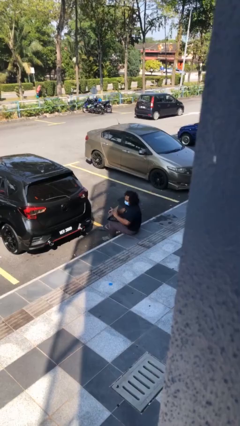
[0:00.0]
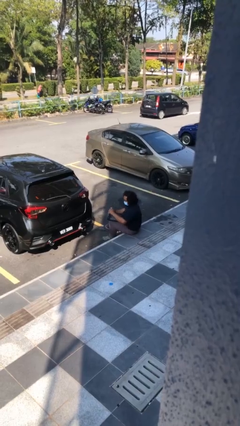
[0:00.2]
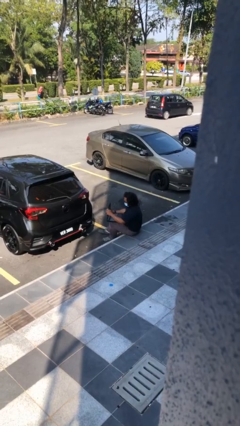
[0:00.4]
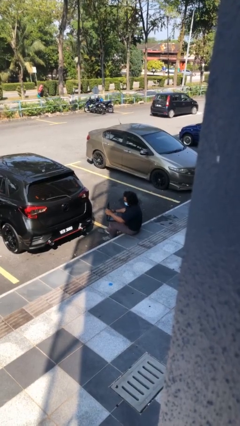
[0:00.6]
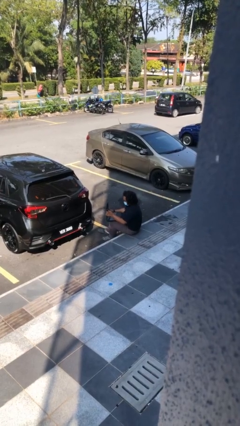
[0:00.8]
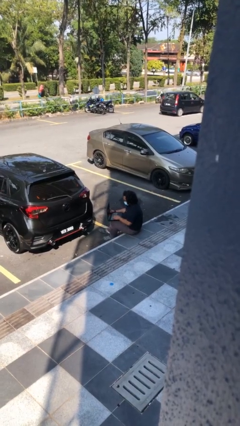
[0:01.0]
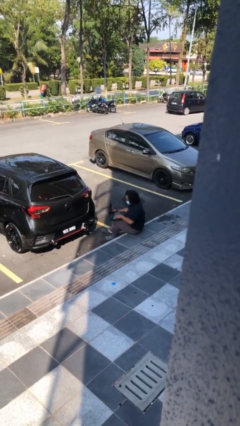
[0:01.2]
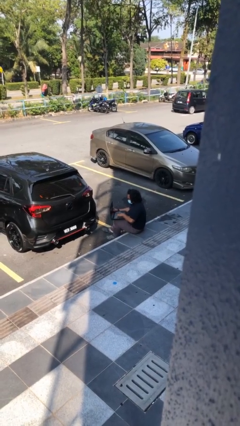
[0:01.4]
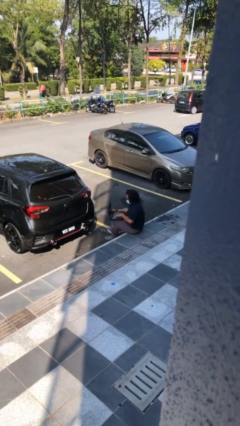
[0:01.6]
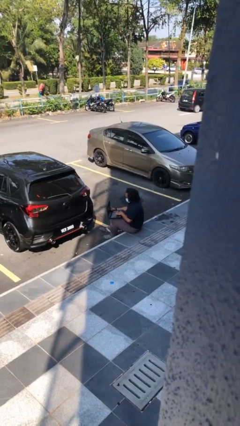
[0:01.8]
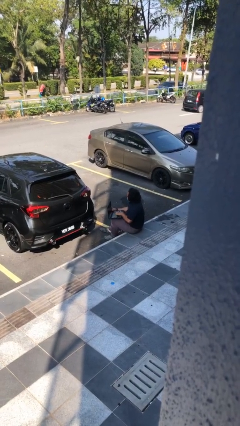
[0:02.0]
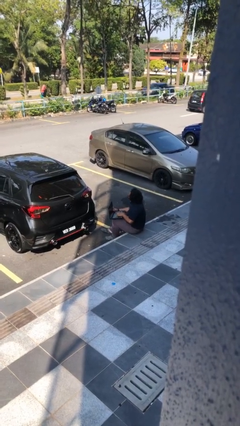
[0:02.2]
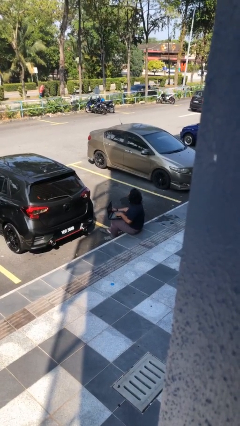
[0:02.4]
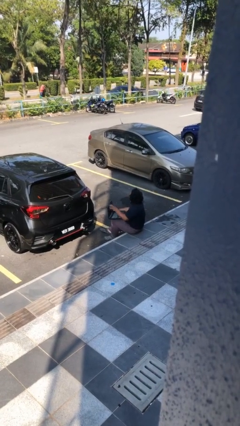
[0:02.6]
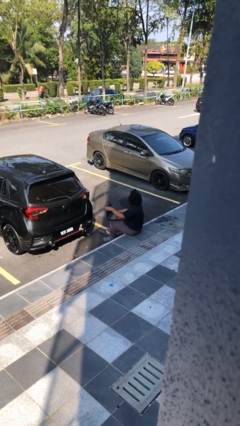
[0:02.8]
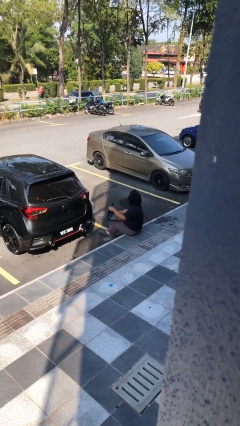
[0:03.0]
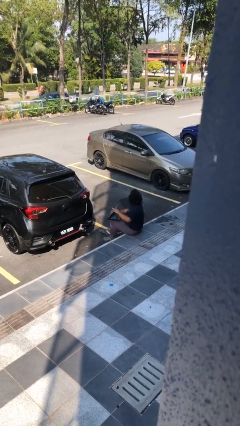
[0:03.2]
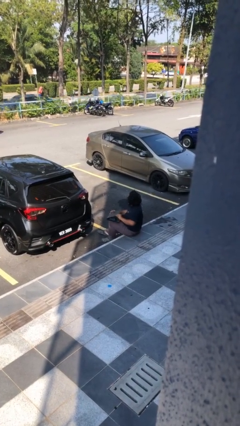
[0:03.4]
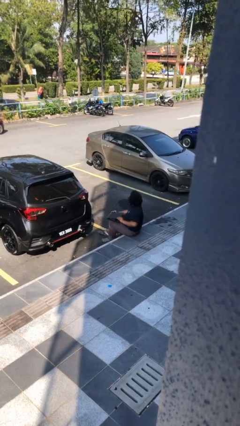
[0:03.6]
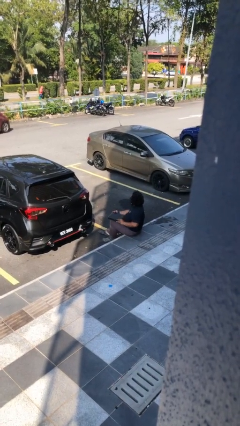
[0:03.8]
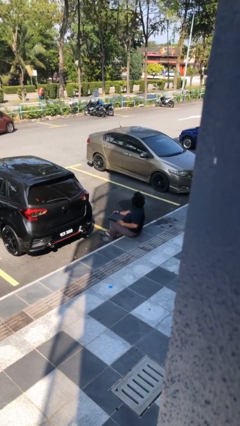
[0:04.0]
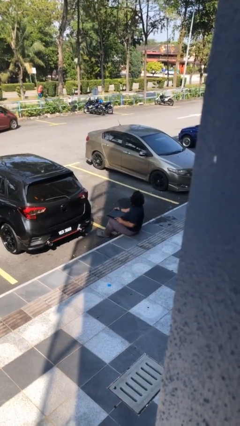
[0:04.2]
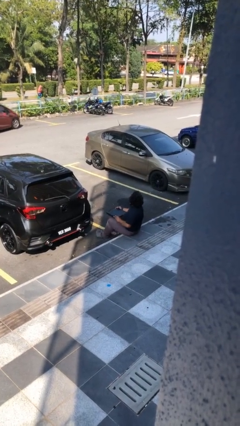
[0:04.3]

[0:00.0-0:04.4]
person interacts with laptop

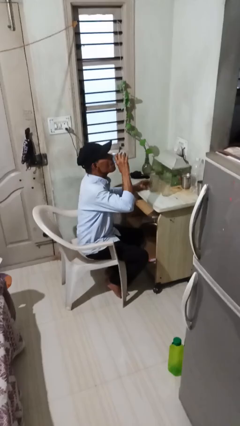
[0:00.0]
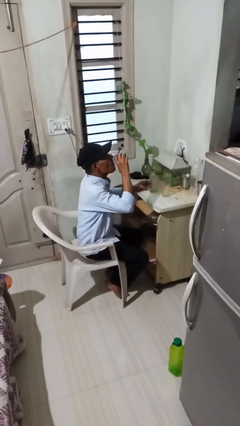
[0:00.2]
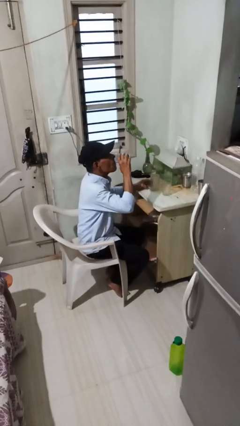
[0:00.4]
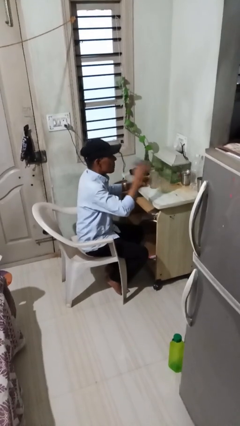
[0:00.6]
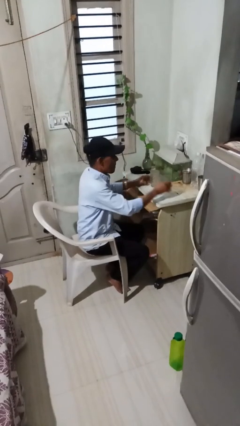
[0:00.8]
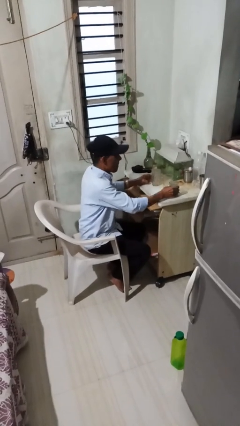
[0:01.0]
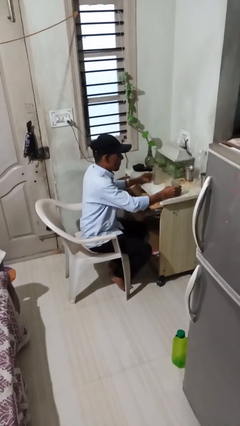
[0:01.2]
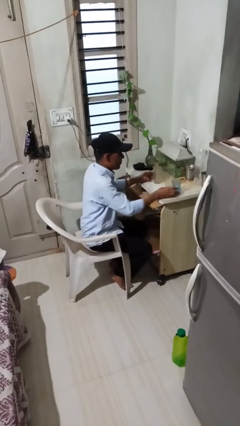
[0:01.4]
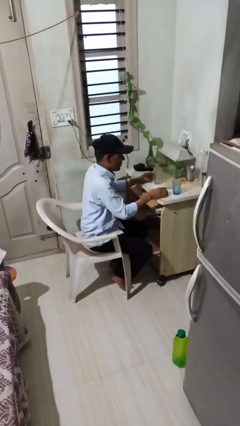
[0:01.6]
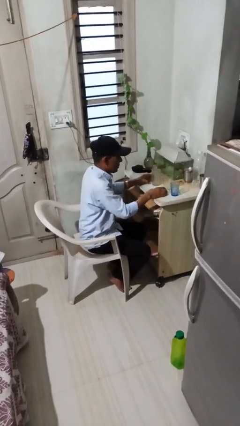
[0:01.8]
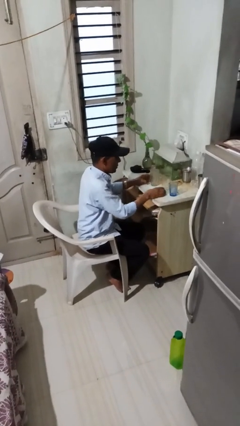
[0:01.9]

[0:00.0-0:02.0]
person puts down object on table

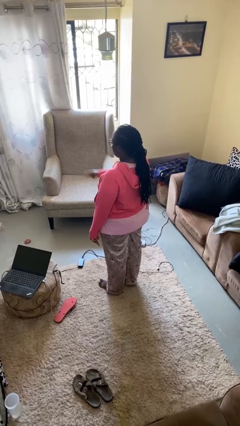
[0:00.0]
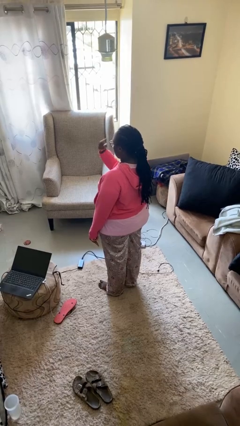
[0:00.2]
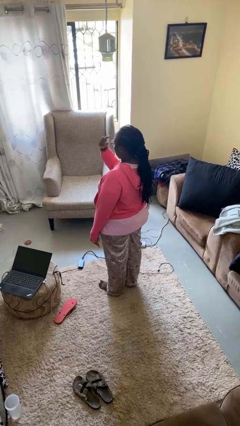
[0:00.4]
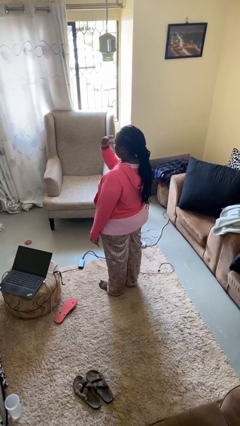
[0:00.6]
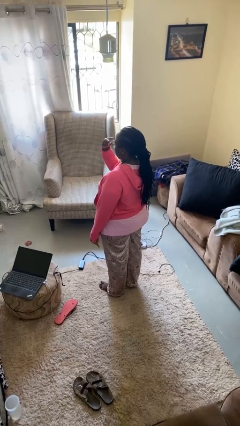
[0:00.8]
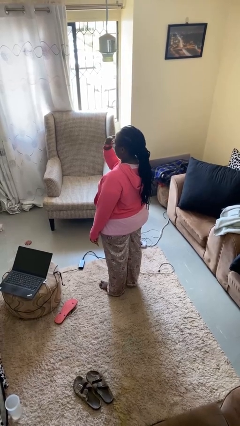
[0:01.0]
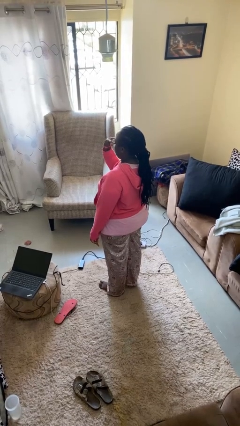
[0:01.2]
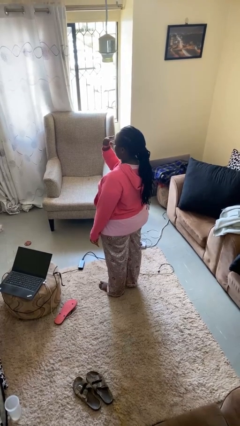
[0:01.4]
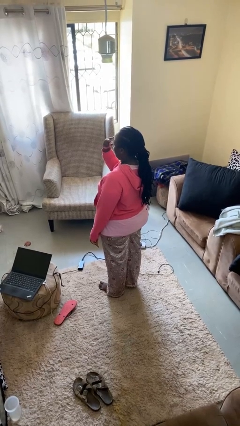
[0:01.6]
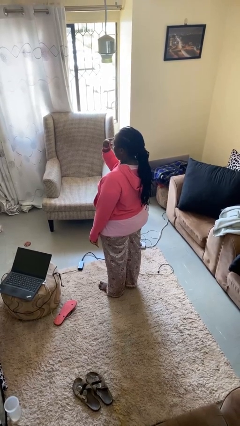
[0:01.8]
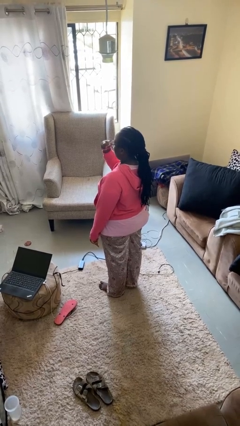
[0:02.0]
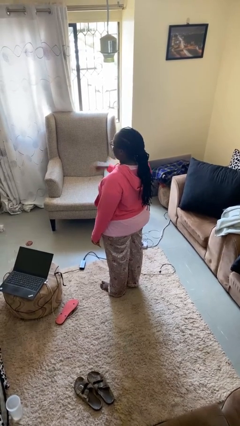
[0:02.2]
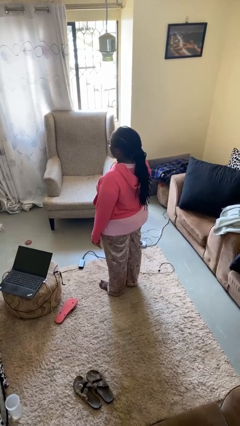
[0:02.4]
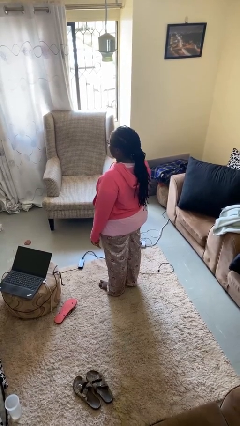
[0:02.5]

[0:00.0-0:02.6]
person gestures watch closely

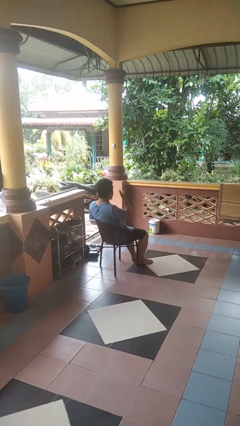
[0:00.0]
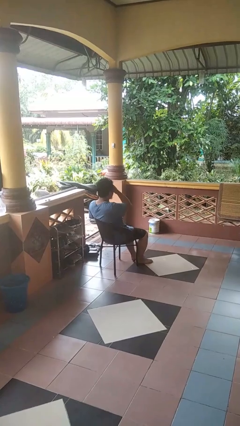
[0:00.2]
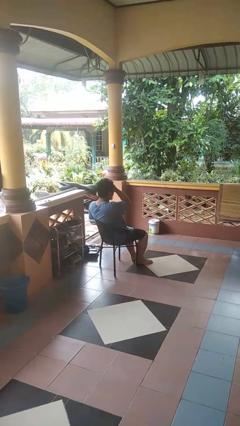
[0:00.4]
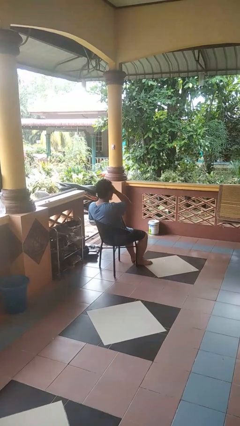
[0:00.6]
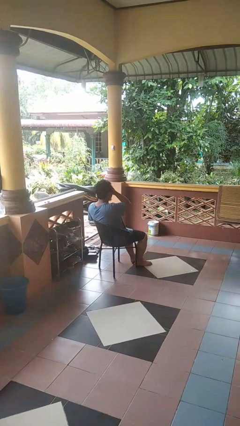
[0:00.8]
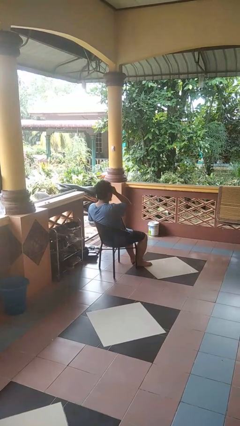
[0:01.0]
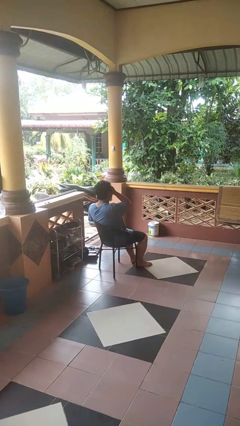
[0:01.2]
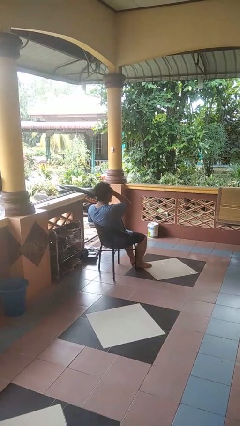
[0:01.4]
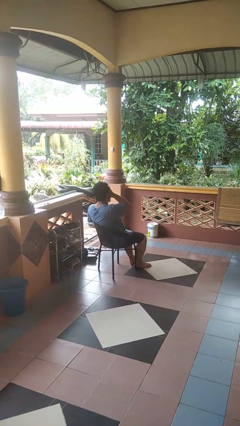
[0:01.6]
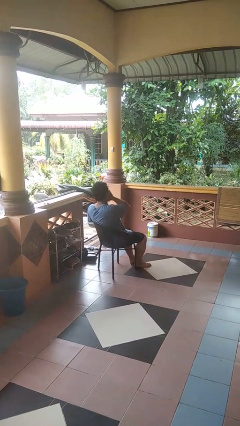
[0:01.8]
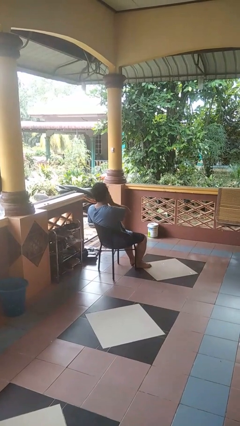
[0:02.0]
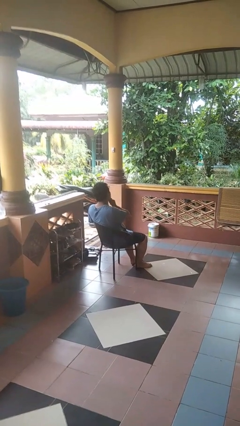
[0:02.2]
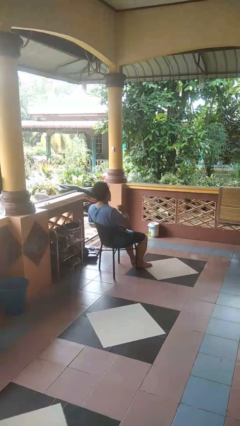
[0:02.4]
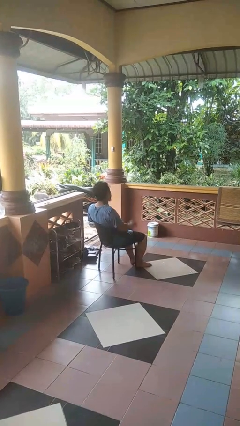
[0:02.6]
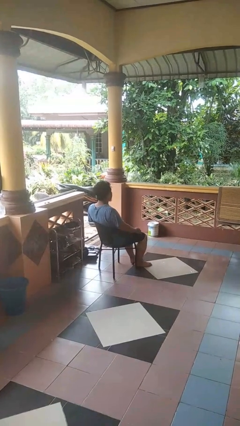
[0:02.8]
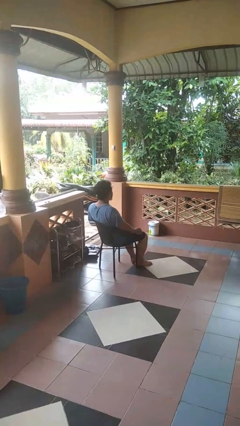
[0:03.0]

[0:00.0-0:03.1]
person rubs eyes

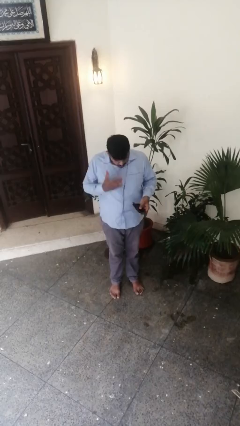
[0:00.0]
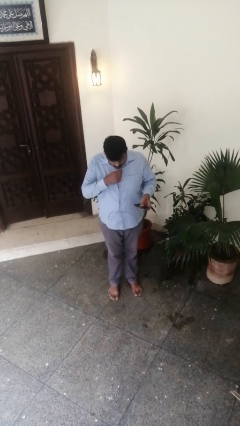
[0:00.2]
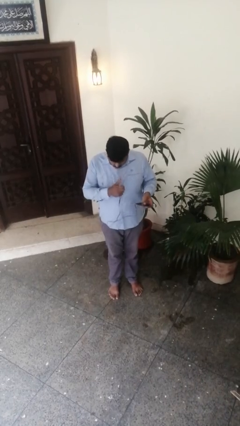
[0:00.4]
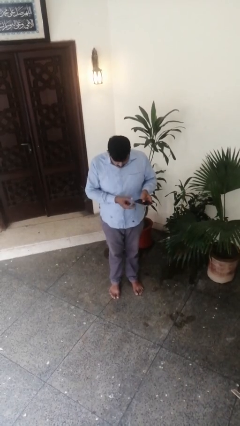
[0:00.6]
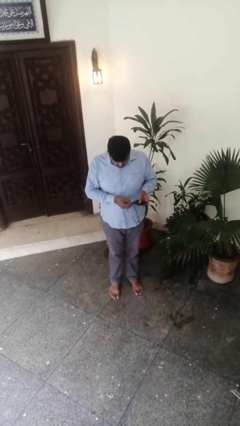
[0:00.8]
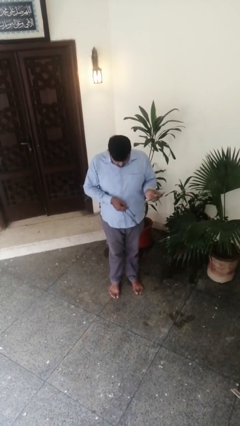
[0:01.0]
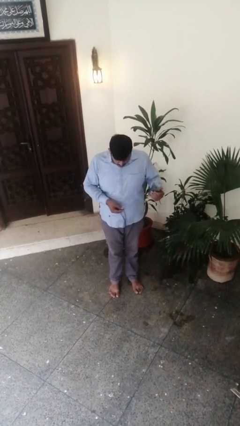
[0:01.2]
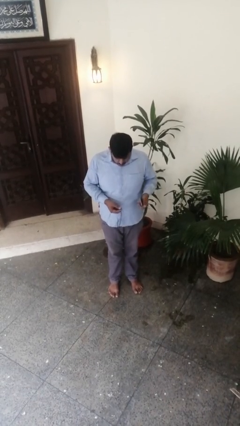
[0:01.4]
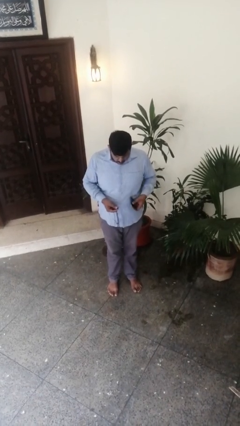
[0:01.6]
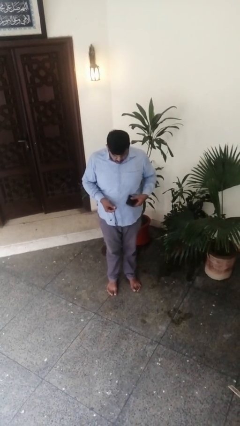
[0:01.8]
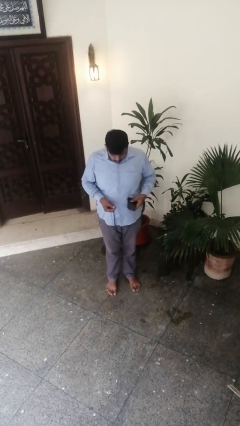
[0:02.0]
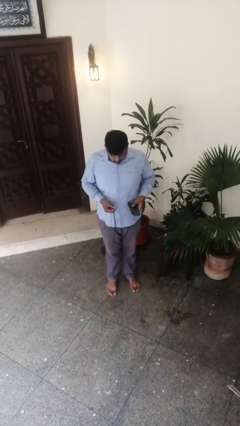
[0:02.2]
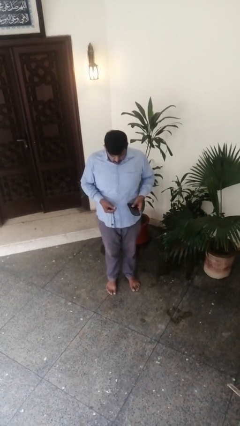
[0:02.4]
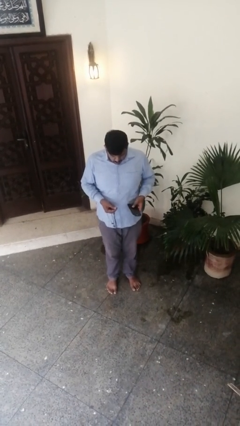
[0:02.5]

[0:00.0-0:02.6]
person takes off headphones

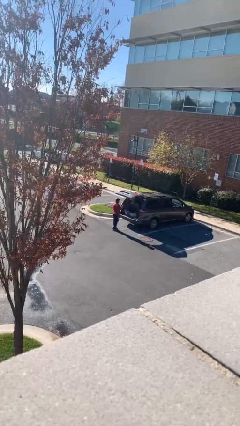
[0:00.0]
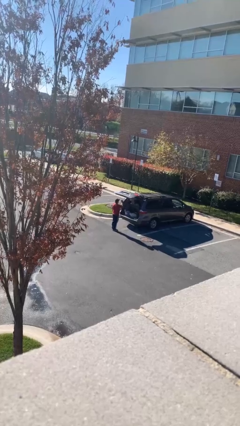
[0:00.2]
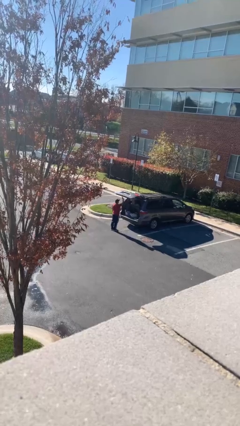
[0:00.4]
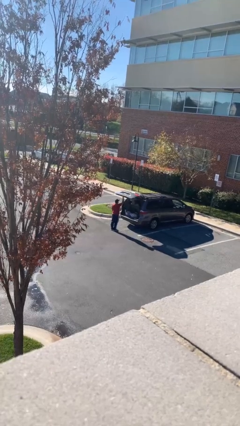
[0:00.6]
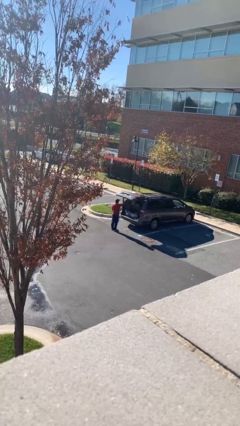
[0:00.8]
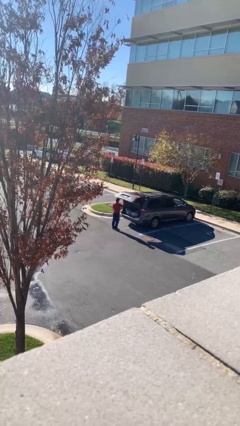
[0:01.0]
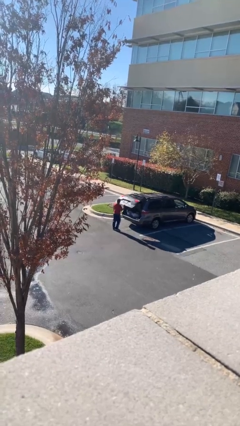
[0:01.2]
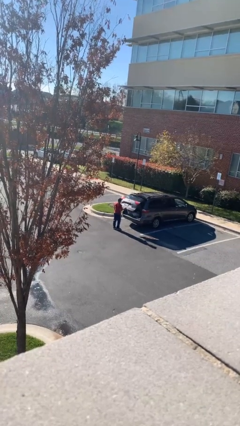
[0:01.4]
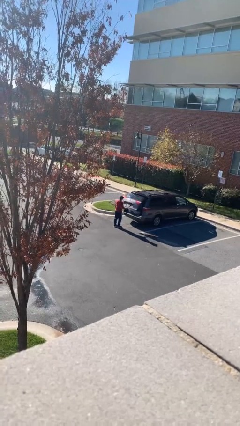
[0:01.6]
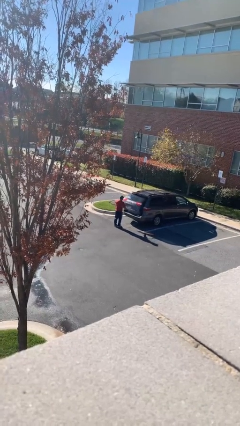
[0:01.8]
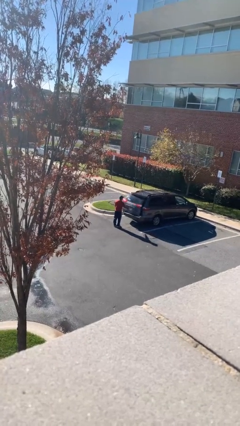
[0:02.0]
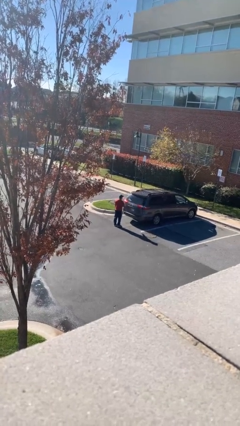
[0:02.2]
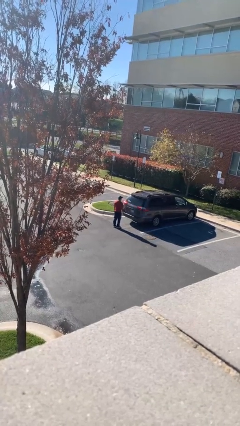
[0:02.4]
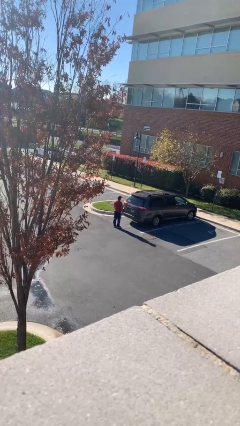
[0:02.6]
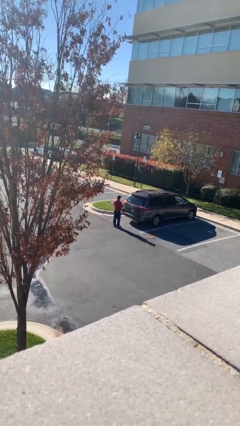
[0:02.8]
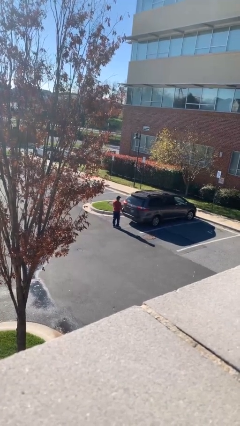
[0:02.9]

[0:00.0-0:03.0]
person closes car trunk
